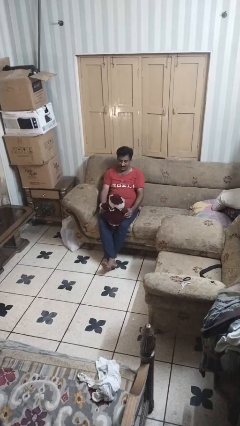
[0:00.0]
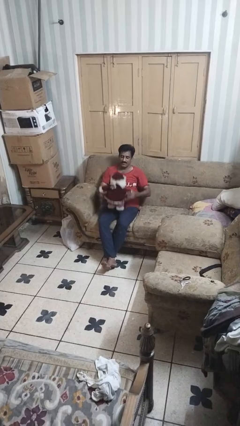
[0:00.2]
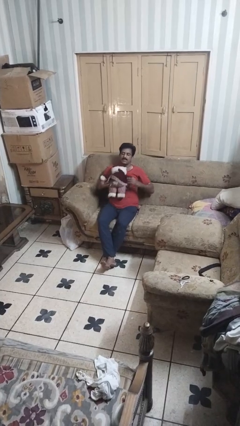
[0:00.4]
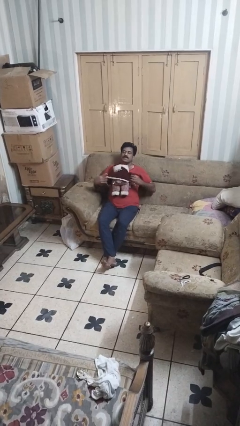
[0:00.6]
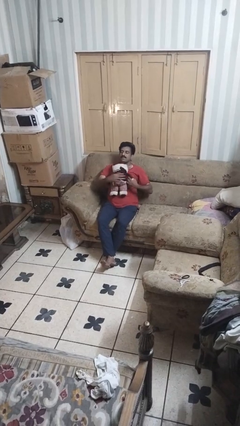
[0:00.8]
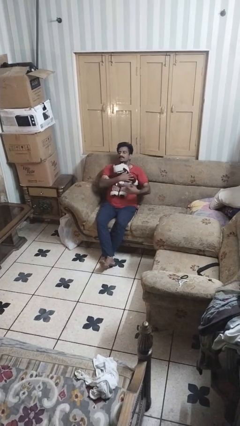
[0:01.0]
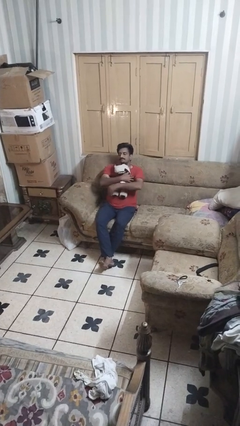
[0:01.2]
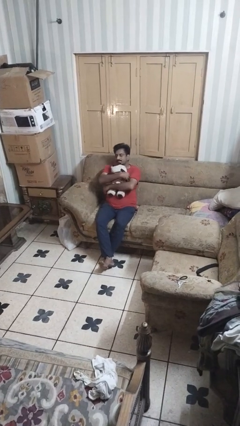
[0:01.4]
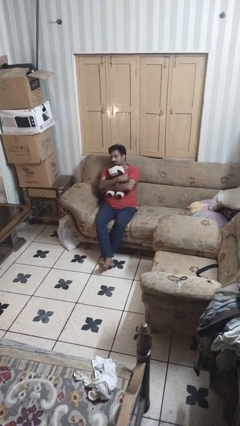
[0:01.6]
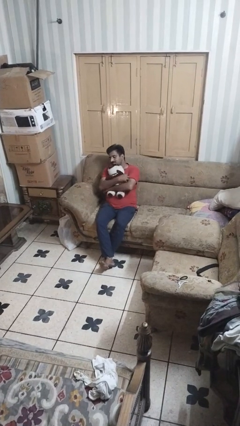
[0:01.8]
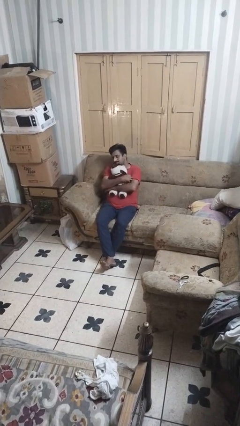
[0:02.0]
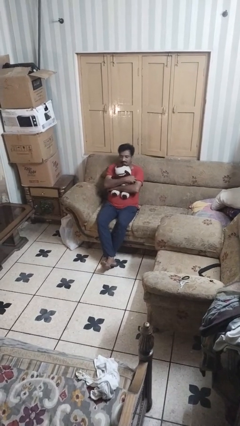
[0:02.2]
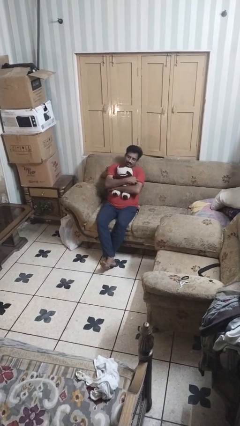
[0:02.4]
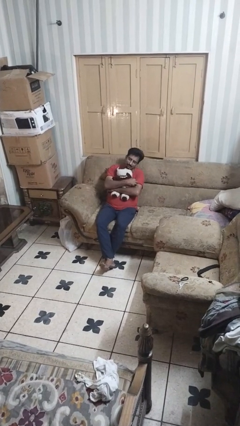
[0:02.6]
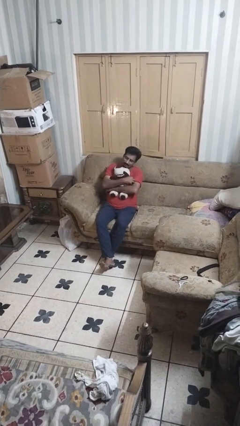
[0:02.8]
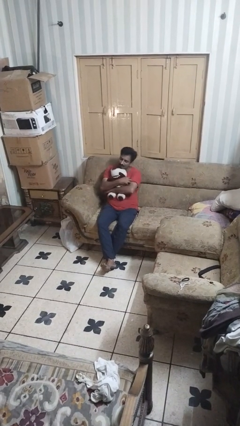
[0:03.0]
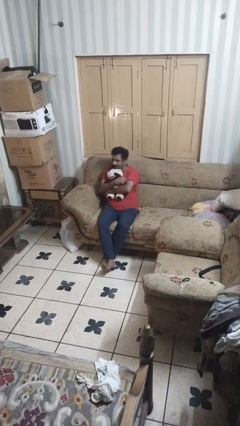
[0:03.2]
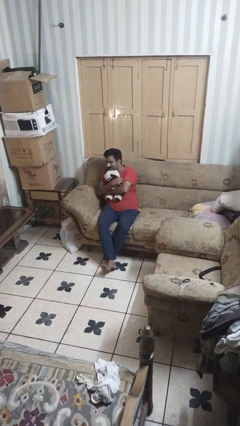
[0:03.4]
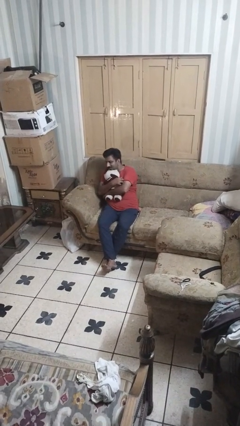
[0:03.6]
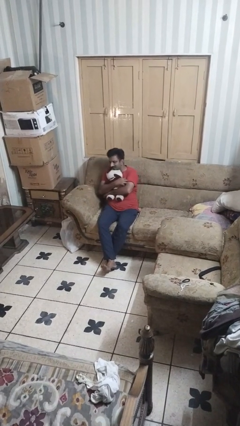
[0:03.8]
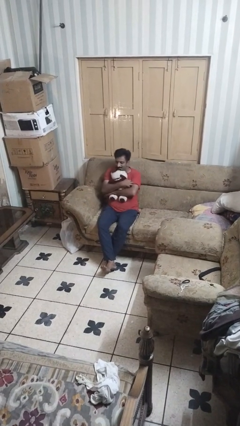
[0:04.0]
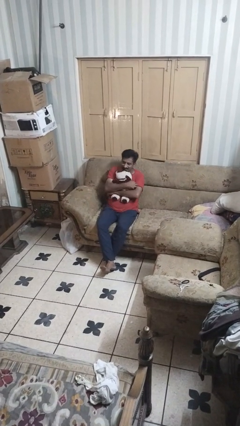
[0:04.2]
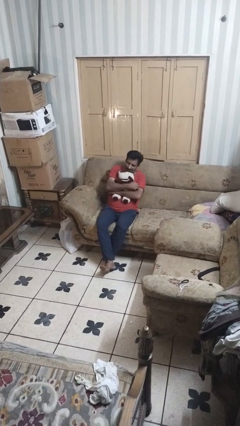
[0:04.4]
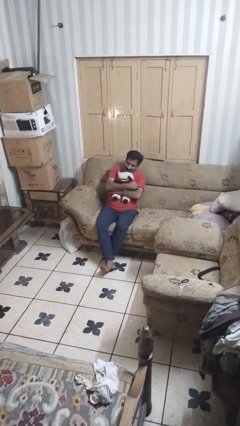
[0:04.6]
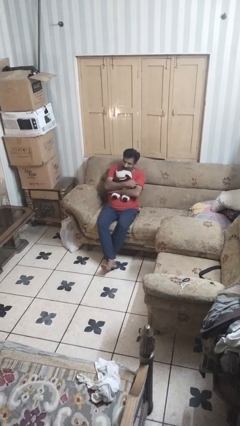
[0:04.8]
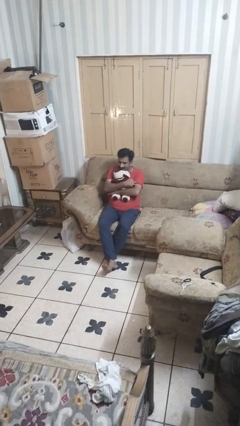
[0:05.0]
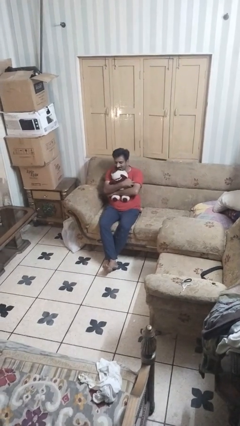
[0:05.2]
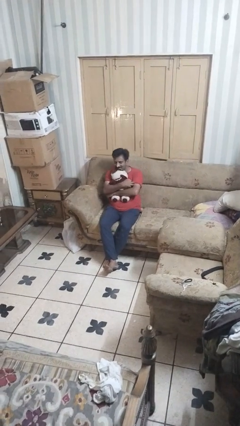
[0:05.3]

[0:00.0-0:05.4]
person hugs stuffed animal

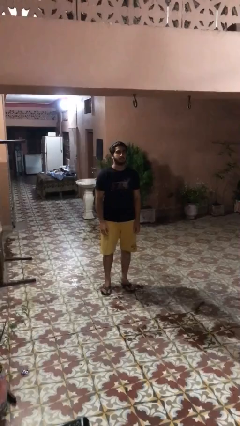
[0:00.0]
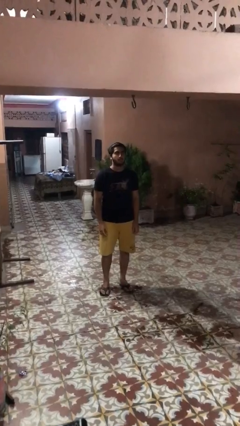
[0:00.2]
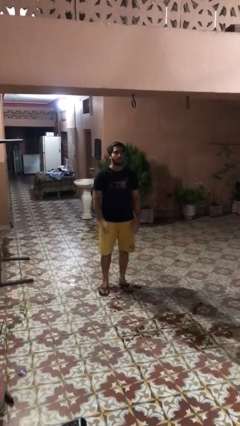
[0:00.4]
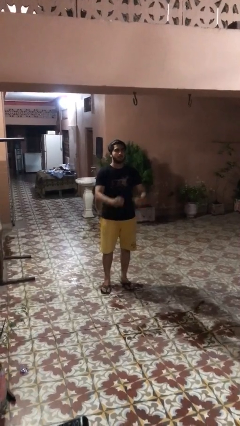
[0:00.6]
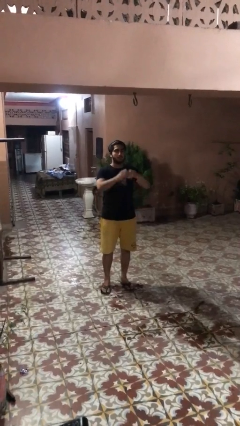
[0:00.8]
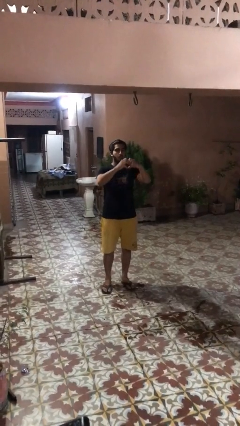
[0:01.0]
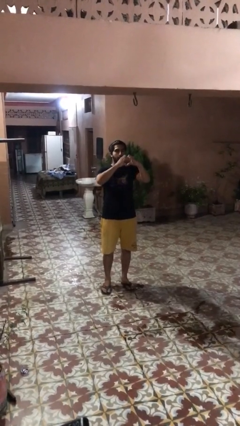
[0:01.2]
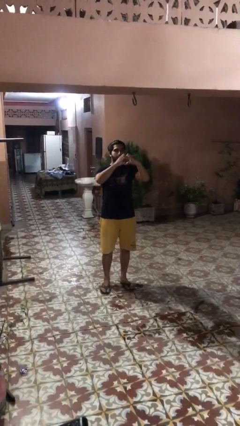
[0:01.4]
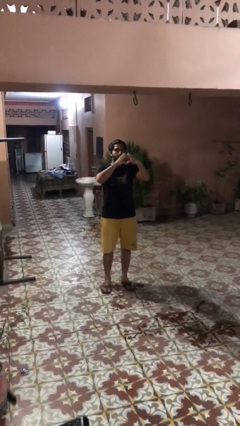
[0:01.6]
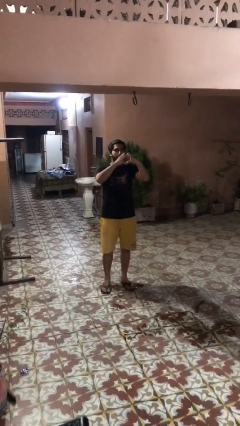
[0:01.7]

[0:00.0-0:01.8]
person gestures heart

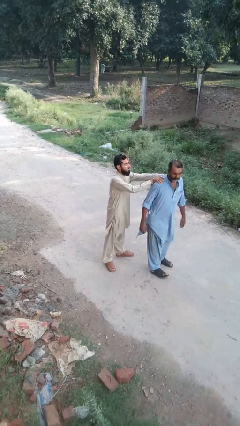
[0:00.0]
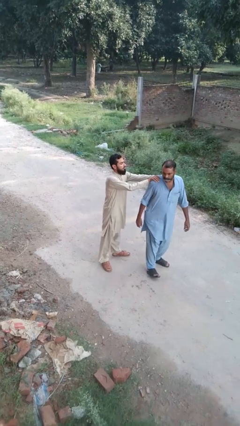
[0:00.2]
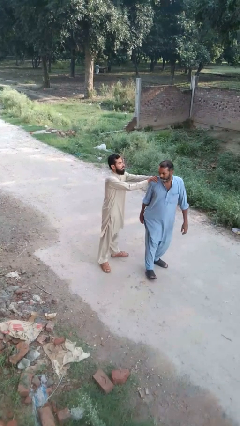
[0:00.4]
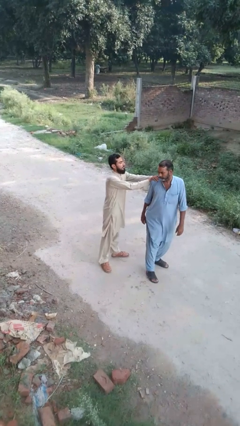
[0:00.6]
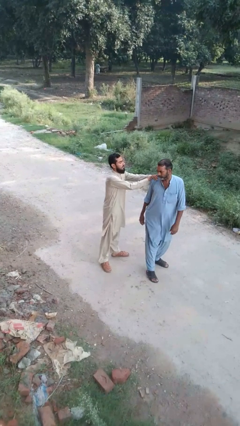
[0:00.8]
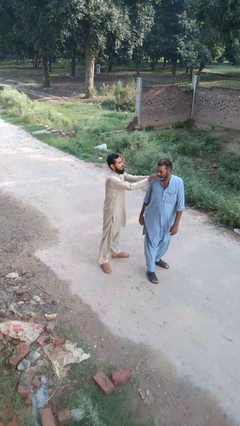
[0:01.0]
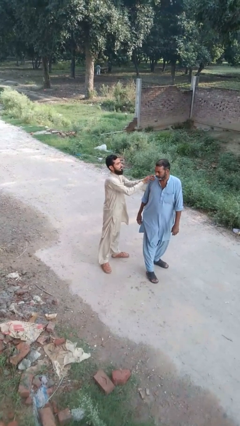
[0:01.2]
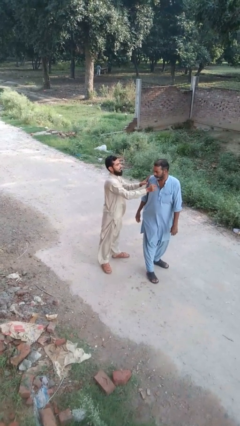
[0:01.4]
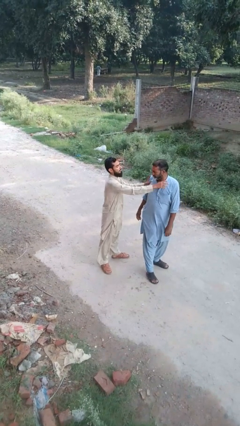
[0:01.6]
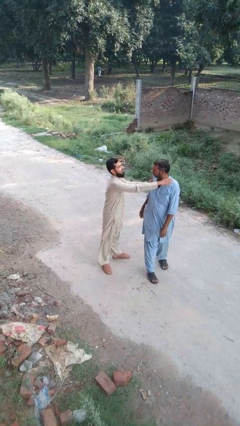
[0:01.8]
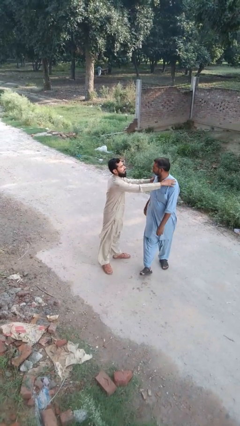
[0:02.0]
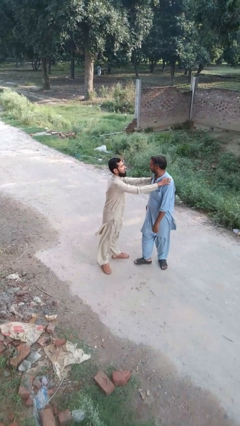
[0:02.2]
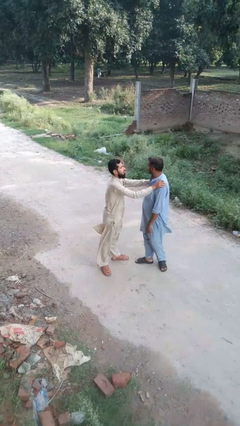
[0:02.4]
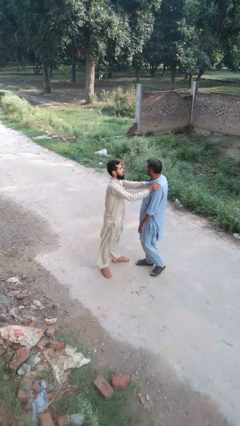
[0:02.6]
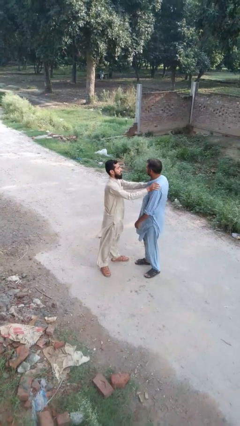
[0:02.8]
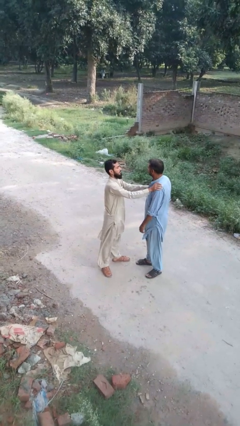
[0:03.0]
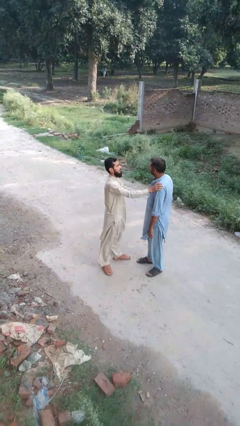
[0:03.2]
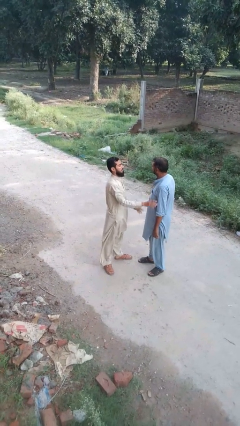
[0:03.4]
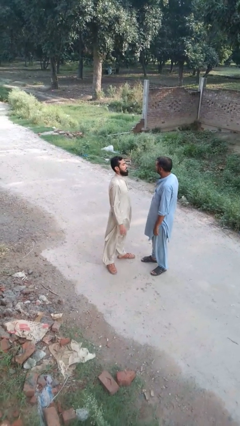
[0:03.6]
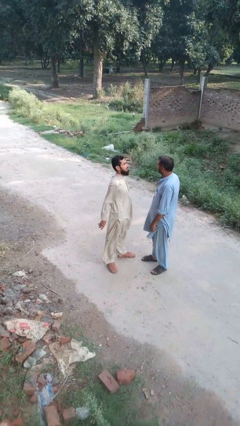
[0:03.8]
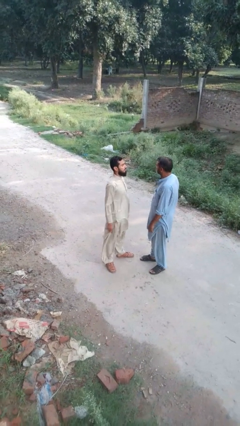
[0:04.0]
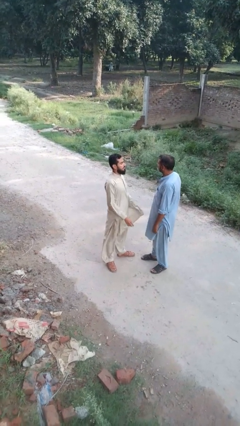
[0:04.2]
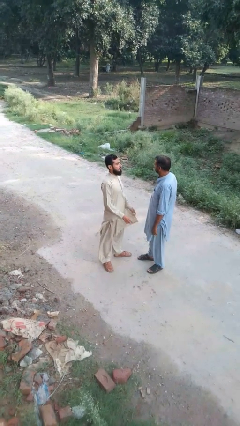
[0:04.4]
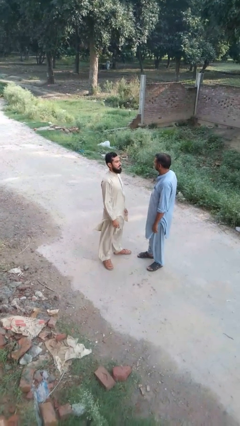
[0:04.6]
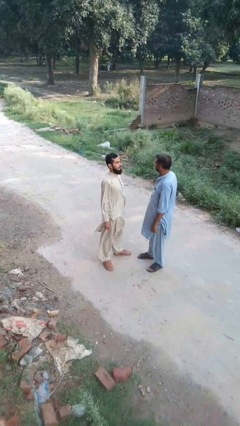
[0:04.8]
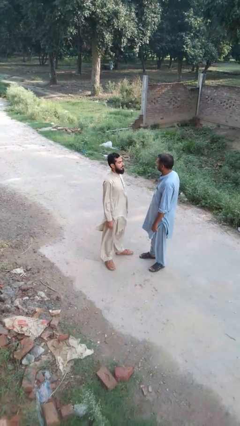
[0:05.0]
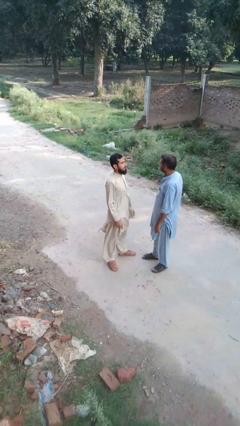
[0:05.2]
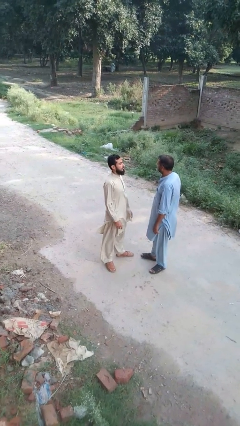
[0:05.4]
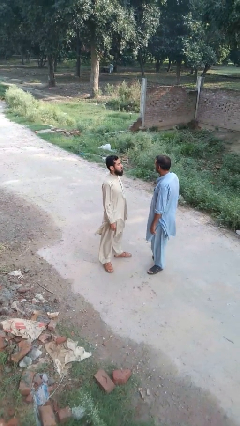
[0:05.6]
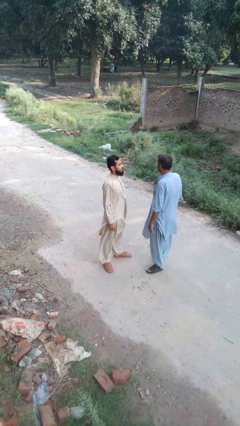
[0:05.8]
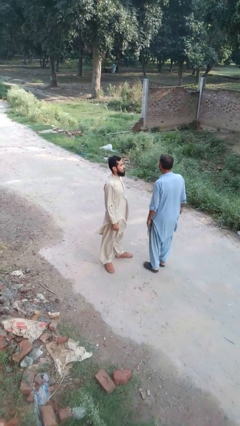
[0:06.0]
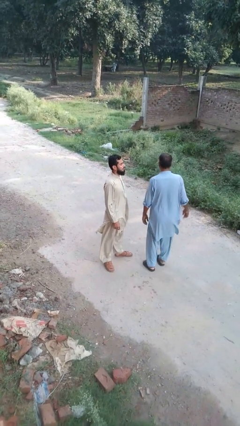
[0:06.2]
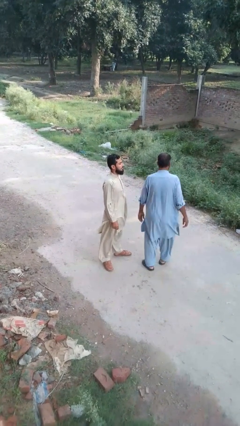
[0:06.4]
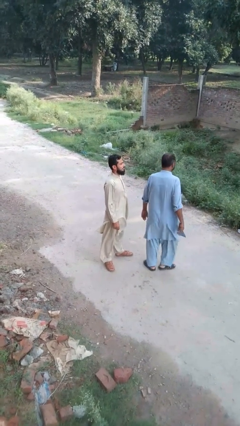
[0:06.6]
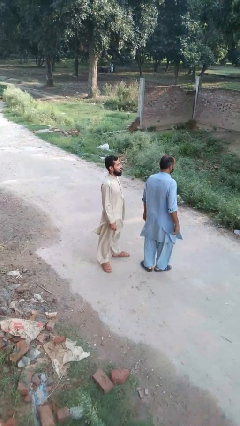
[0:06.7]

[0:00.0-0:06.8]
person spins person around

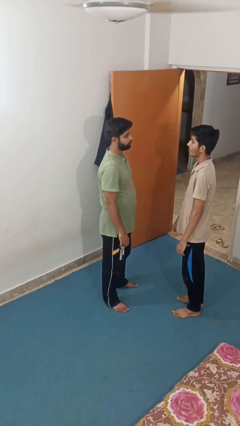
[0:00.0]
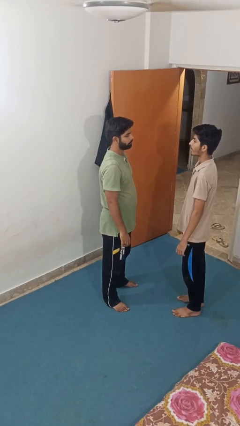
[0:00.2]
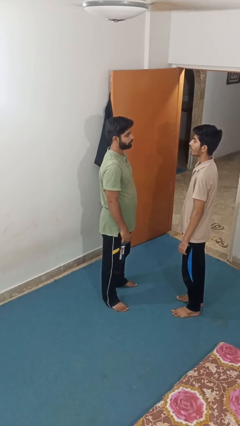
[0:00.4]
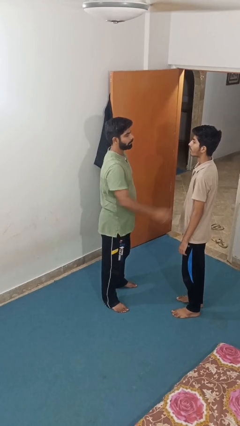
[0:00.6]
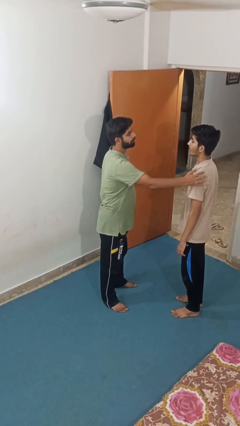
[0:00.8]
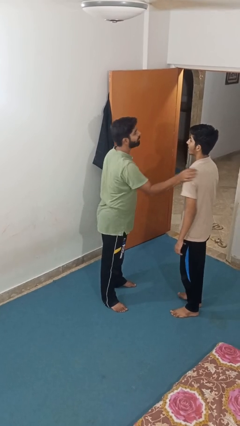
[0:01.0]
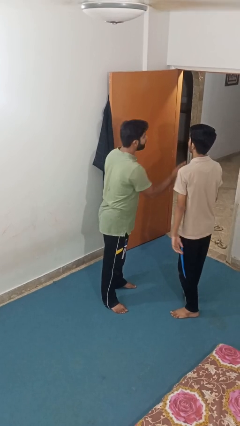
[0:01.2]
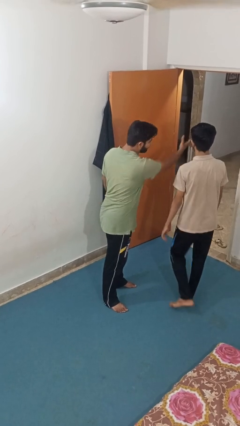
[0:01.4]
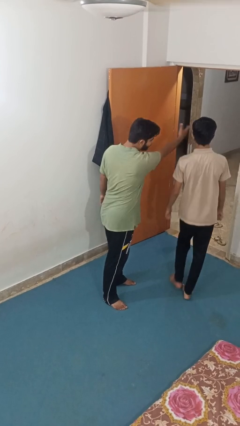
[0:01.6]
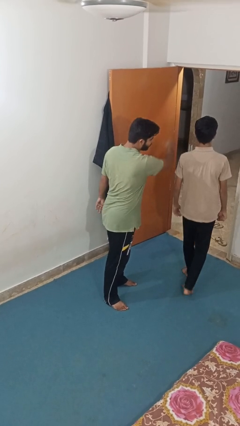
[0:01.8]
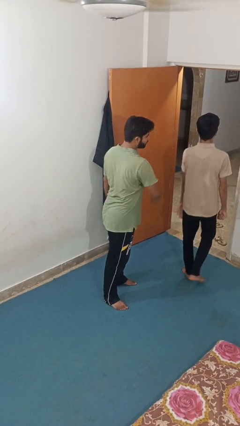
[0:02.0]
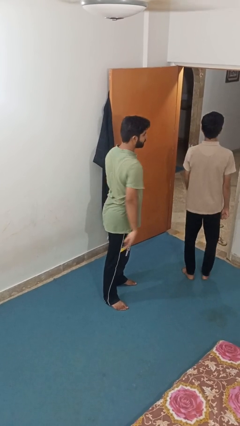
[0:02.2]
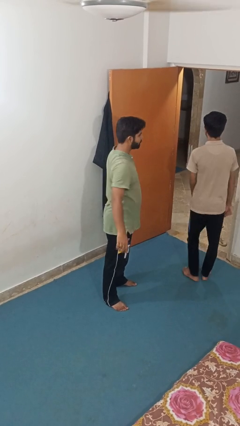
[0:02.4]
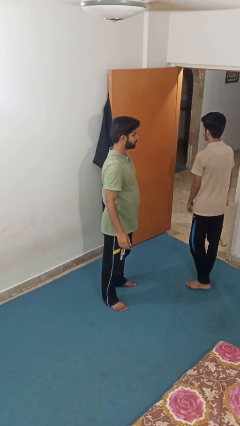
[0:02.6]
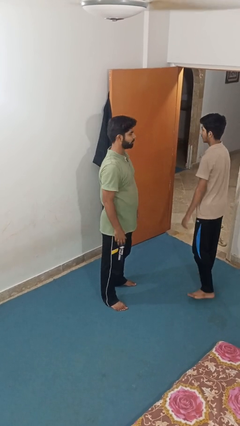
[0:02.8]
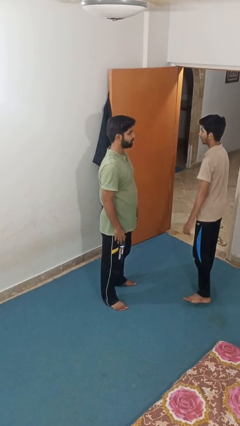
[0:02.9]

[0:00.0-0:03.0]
person shoves person

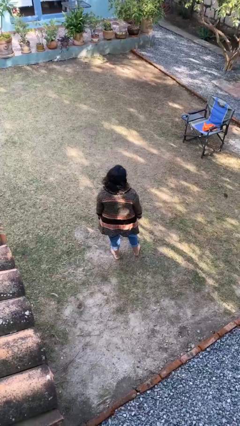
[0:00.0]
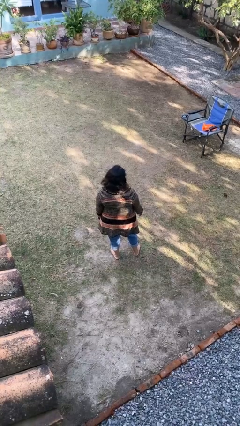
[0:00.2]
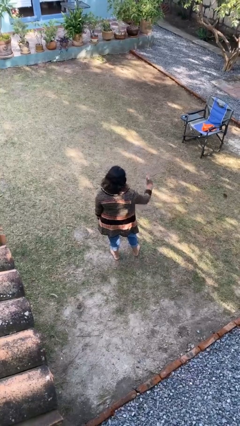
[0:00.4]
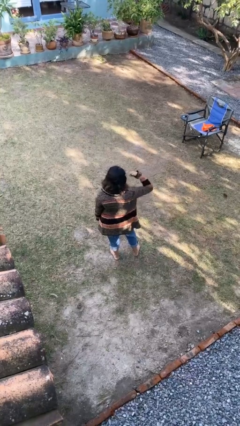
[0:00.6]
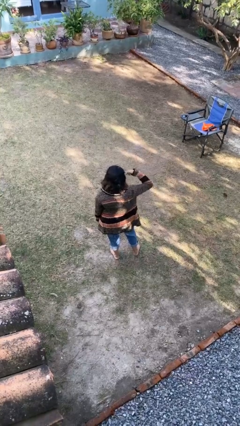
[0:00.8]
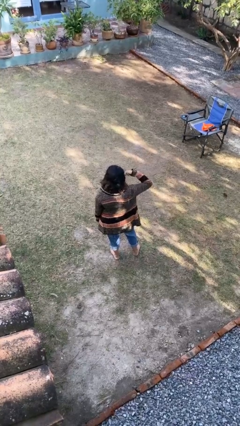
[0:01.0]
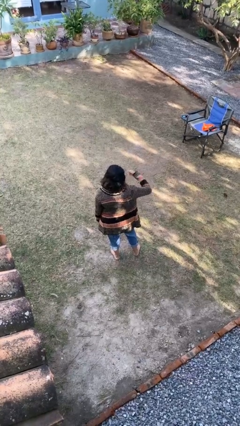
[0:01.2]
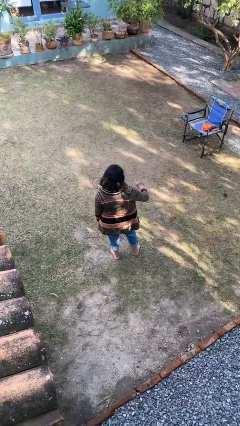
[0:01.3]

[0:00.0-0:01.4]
person gestures call me
